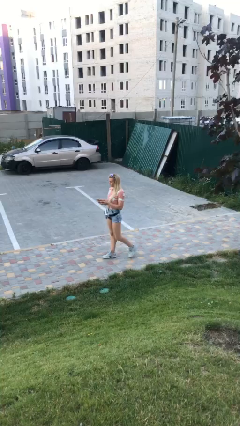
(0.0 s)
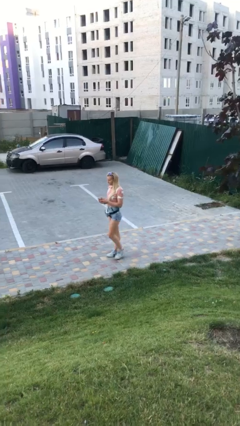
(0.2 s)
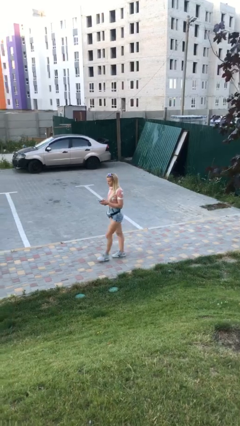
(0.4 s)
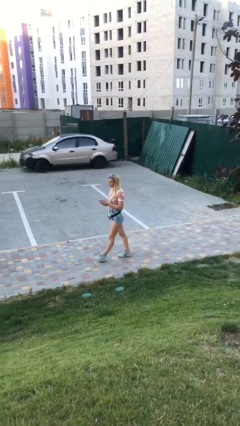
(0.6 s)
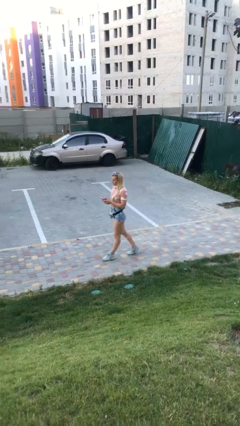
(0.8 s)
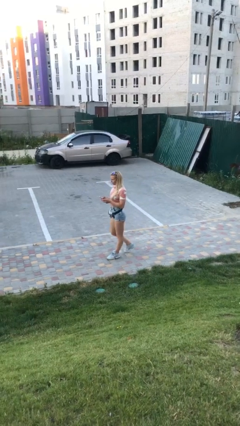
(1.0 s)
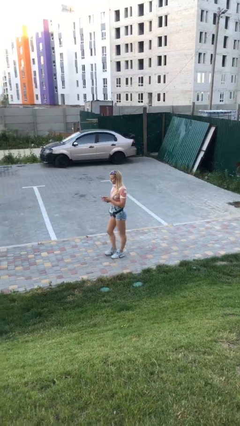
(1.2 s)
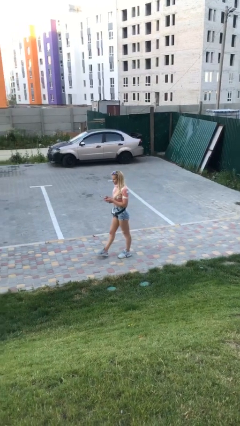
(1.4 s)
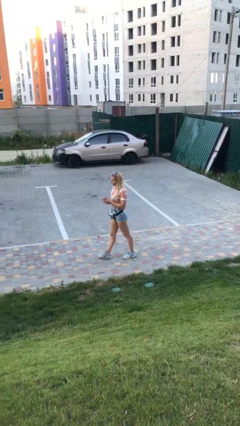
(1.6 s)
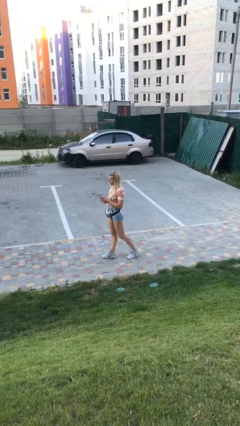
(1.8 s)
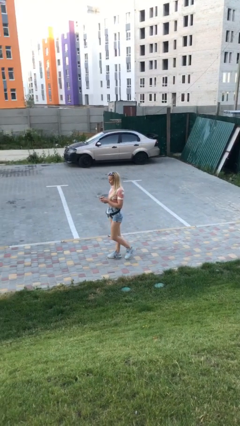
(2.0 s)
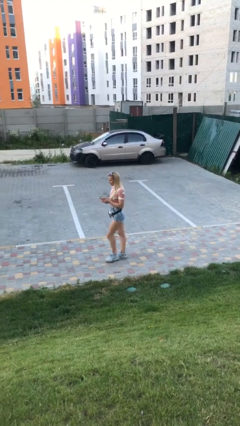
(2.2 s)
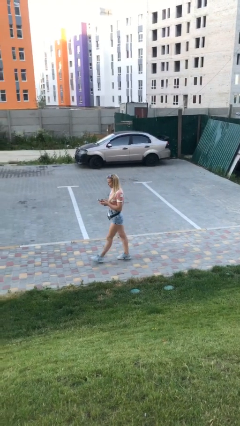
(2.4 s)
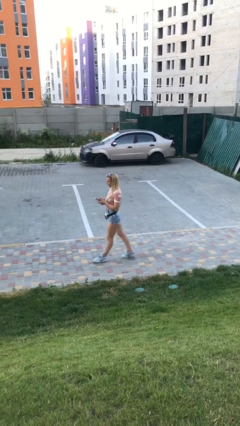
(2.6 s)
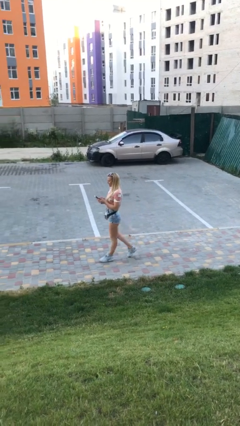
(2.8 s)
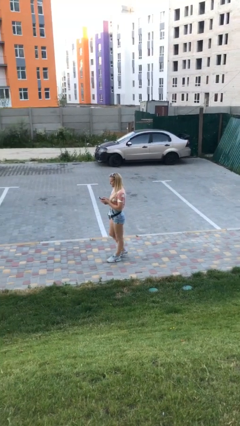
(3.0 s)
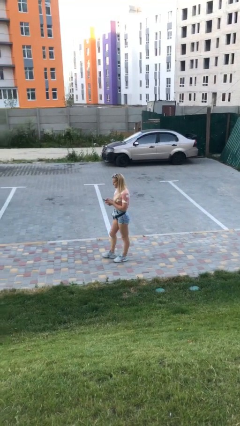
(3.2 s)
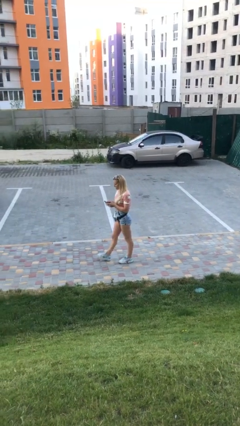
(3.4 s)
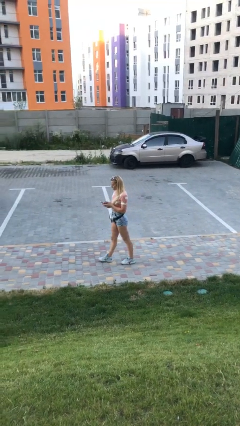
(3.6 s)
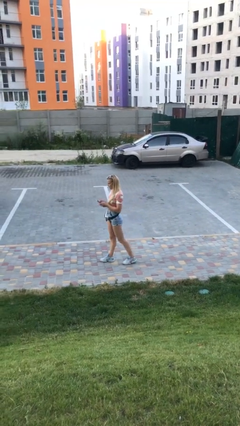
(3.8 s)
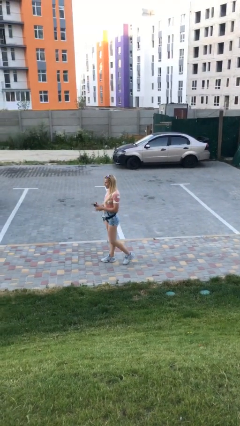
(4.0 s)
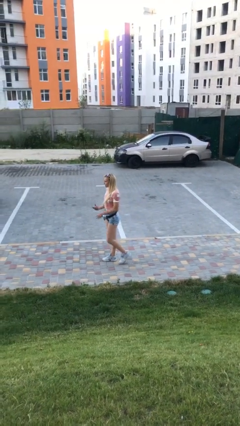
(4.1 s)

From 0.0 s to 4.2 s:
person texts on phone

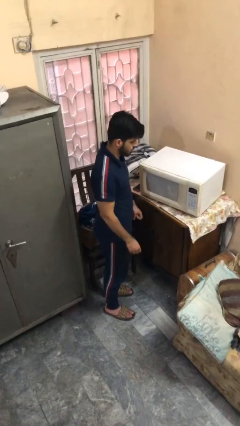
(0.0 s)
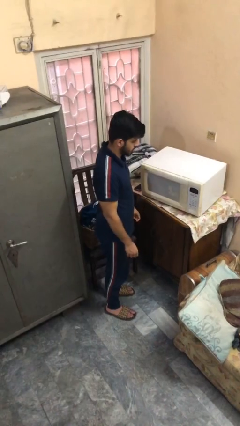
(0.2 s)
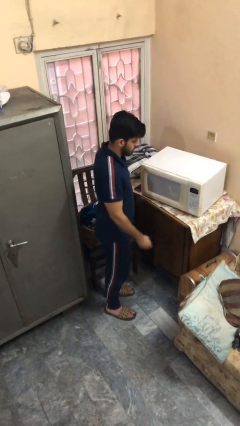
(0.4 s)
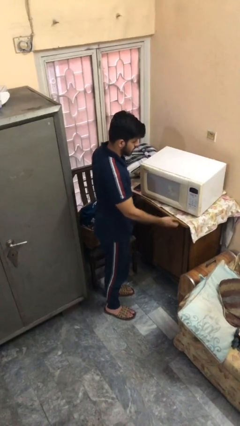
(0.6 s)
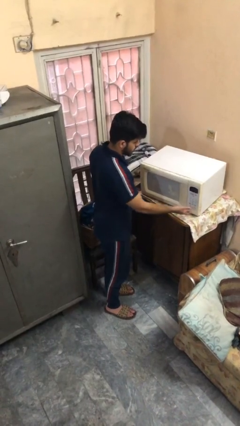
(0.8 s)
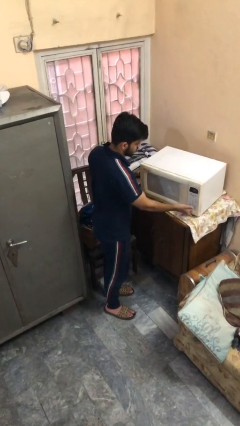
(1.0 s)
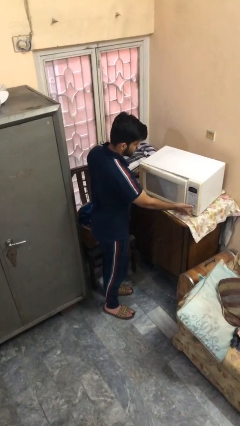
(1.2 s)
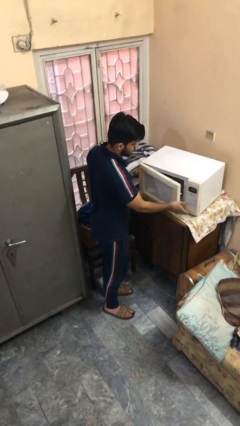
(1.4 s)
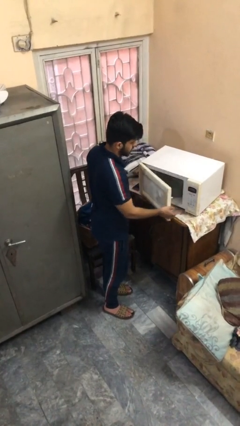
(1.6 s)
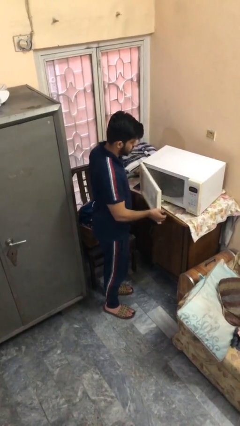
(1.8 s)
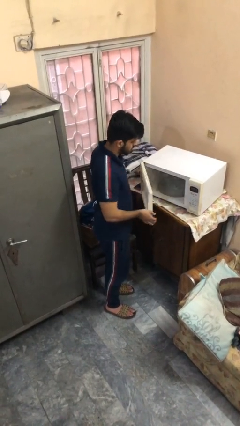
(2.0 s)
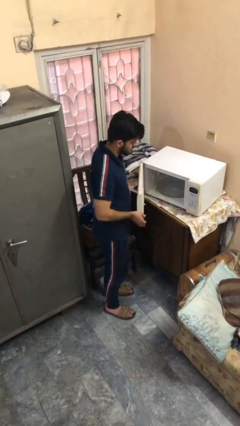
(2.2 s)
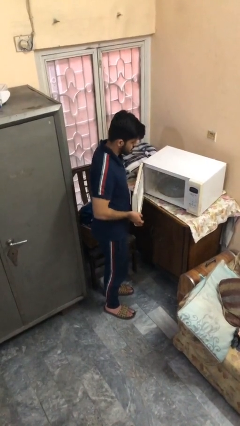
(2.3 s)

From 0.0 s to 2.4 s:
person opens microwave

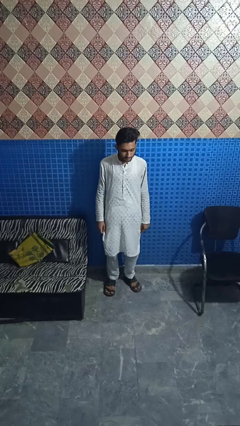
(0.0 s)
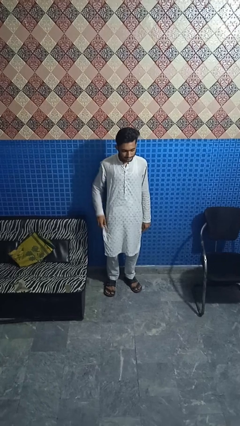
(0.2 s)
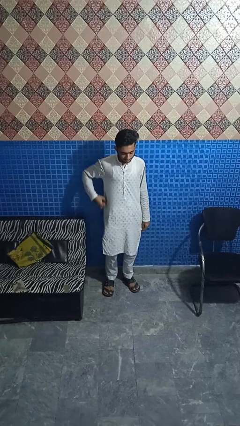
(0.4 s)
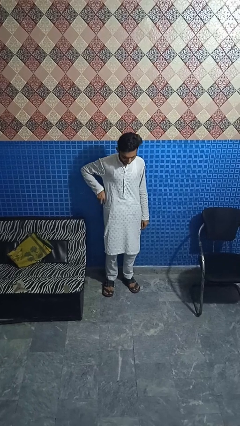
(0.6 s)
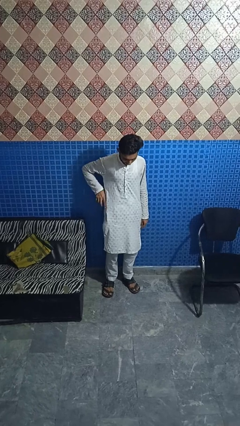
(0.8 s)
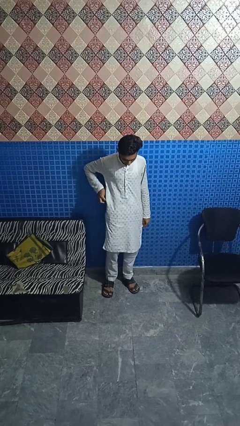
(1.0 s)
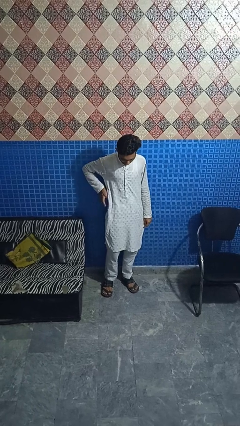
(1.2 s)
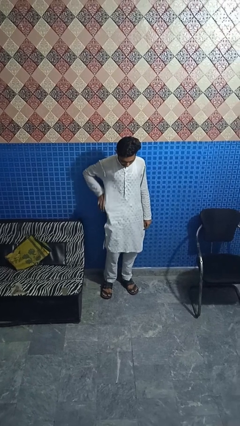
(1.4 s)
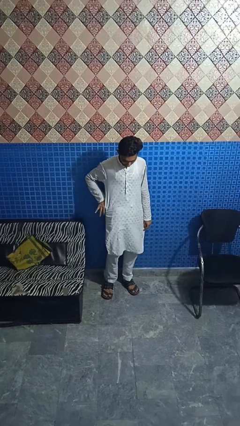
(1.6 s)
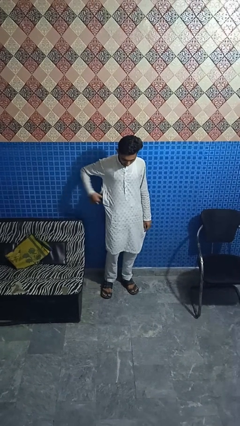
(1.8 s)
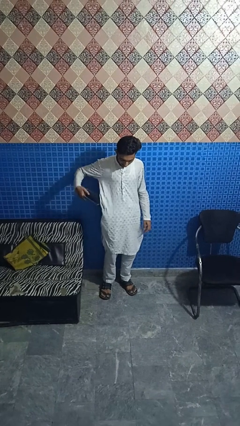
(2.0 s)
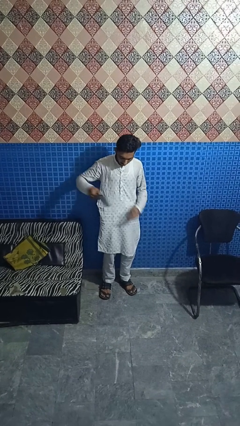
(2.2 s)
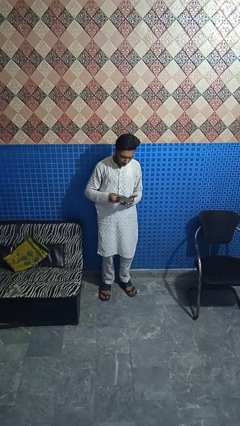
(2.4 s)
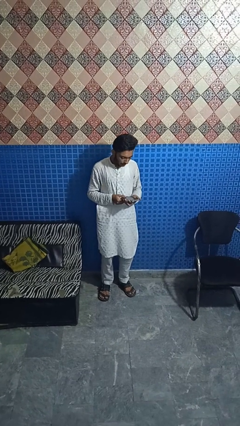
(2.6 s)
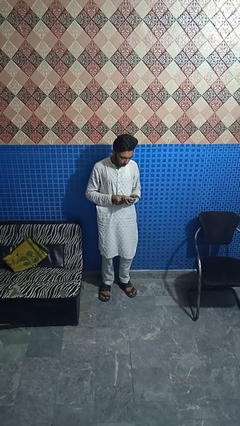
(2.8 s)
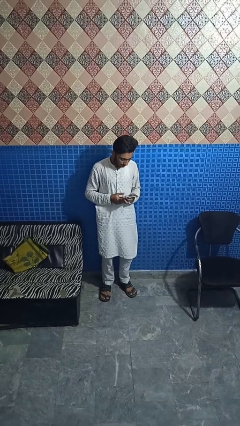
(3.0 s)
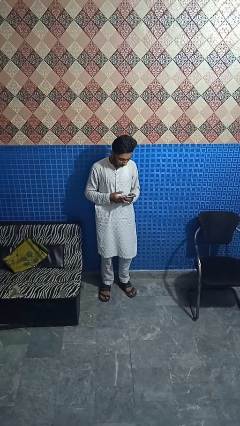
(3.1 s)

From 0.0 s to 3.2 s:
person takes phone from pocket

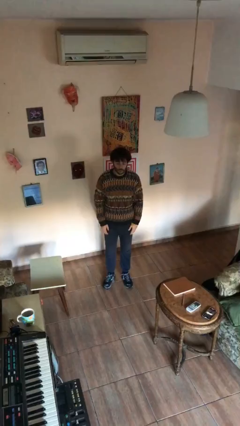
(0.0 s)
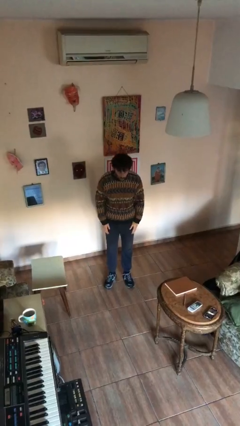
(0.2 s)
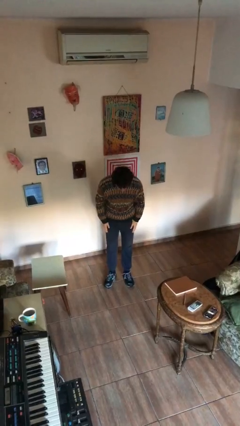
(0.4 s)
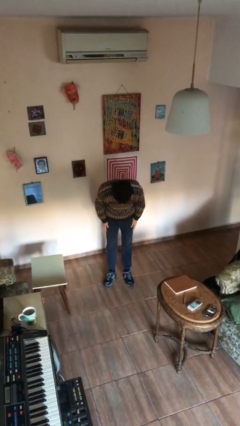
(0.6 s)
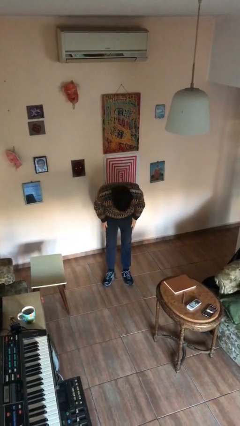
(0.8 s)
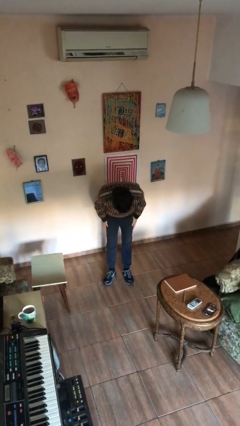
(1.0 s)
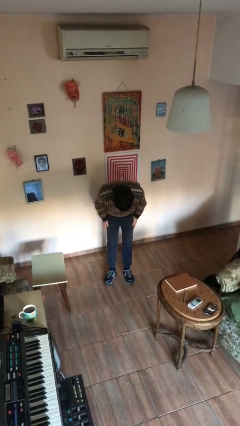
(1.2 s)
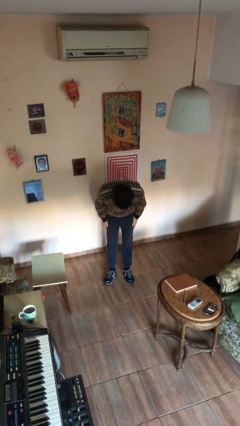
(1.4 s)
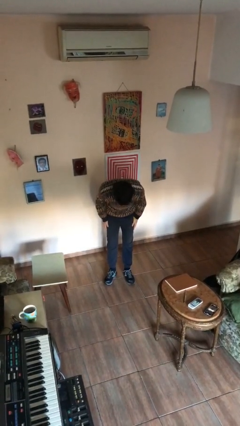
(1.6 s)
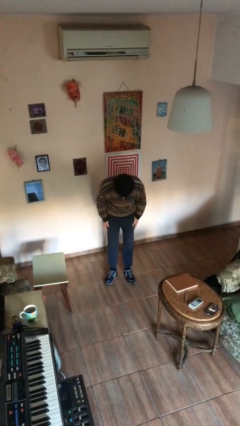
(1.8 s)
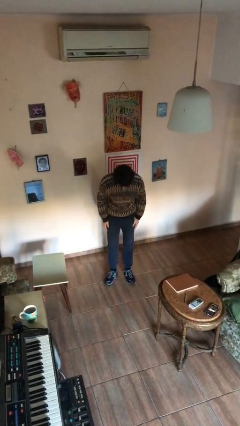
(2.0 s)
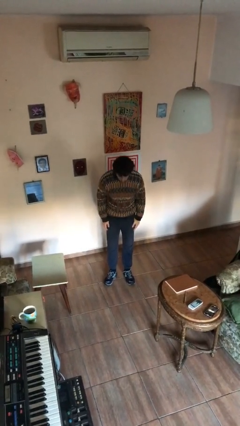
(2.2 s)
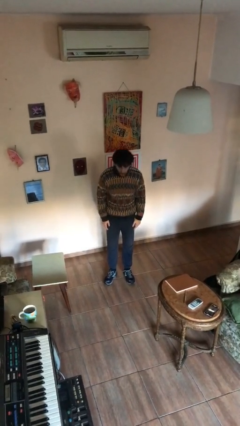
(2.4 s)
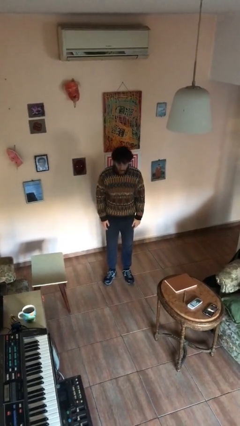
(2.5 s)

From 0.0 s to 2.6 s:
person bows

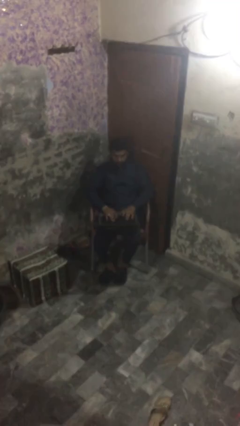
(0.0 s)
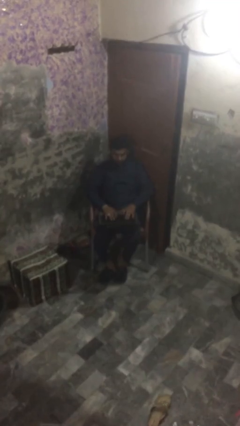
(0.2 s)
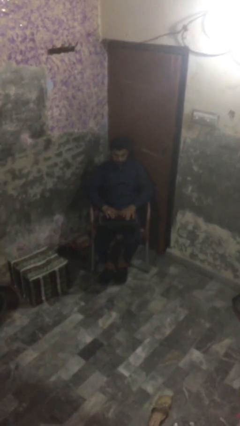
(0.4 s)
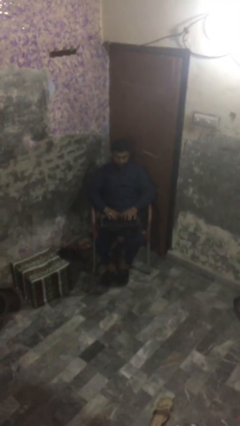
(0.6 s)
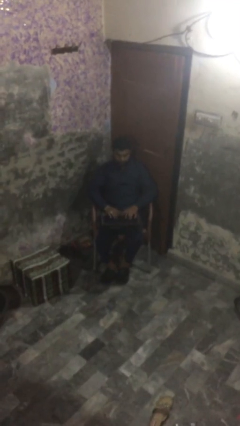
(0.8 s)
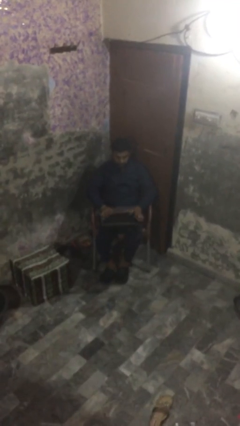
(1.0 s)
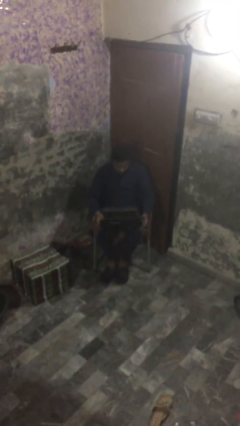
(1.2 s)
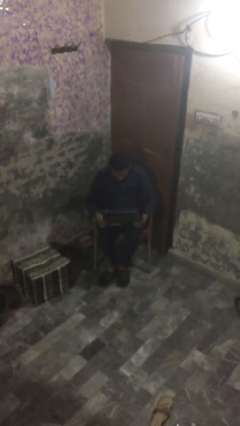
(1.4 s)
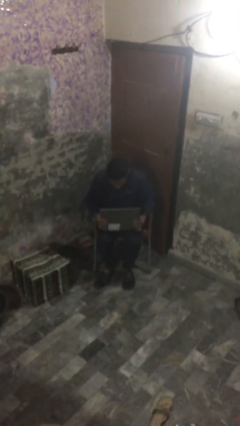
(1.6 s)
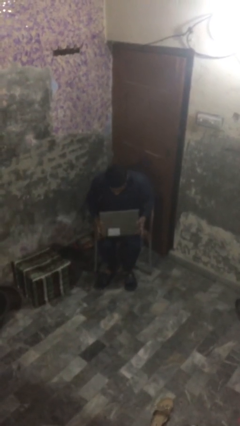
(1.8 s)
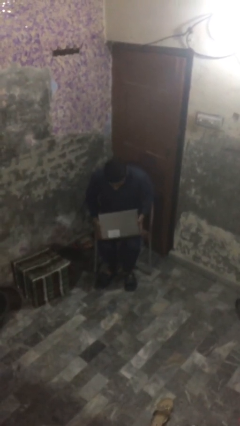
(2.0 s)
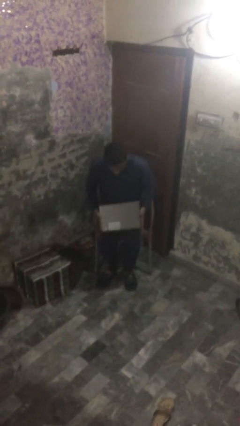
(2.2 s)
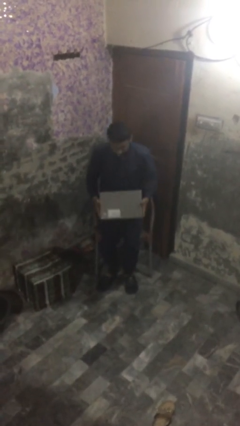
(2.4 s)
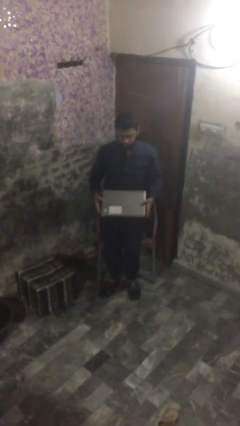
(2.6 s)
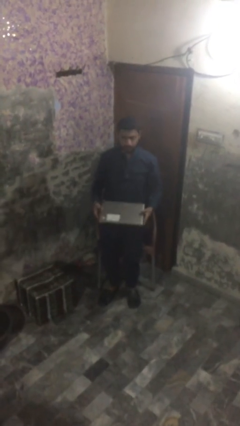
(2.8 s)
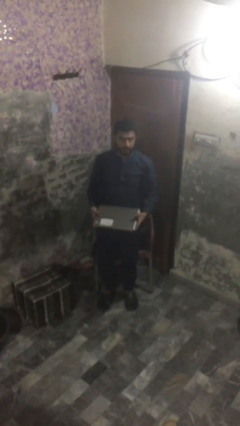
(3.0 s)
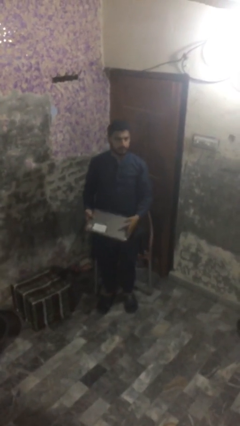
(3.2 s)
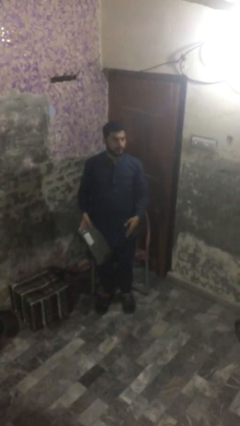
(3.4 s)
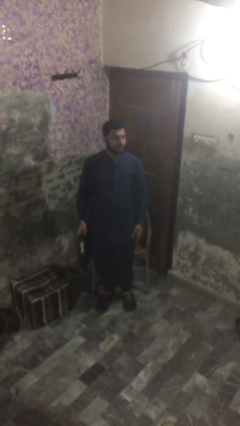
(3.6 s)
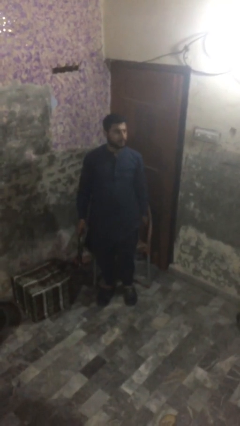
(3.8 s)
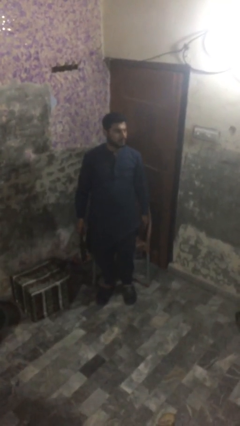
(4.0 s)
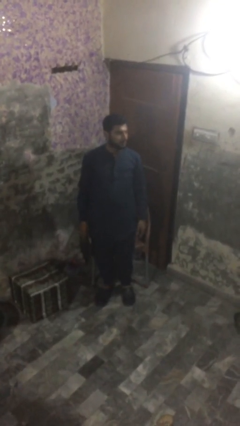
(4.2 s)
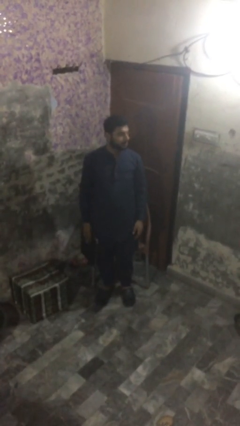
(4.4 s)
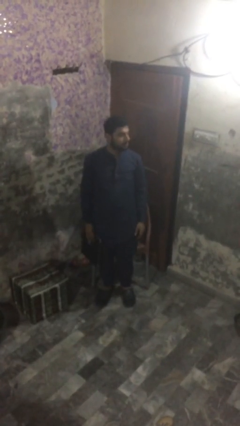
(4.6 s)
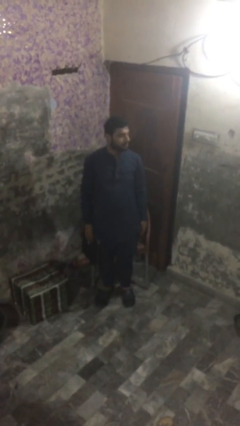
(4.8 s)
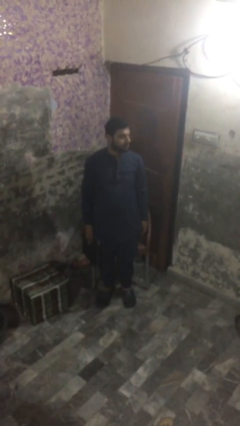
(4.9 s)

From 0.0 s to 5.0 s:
person stands up
